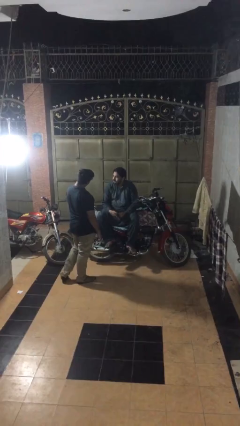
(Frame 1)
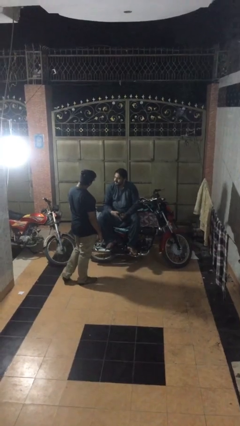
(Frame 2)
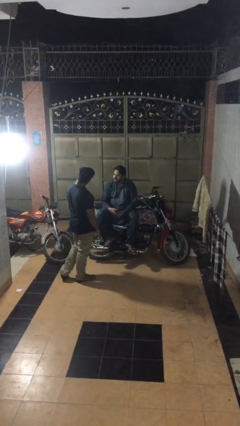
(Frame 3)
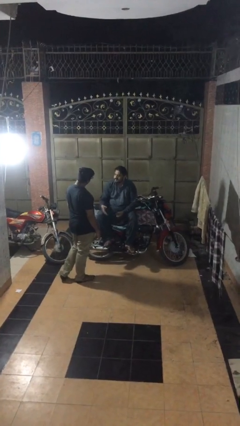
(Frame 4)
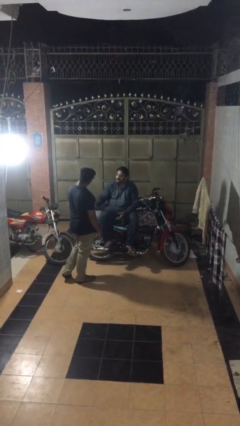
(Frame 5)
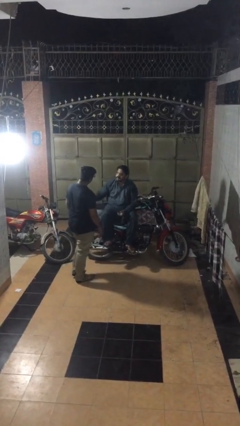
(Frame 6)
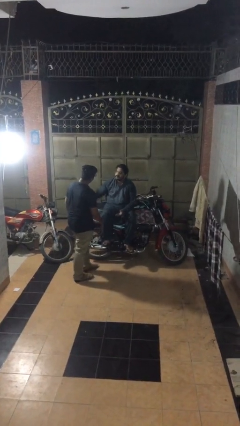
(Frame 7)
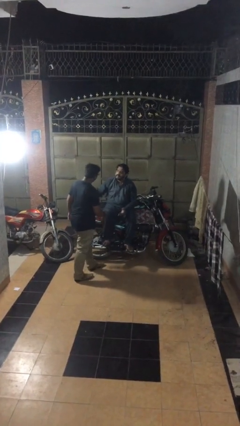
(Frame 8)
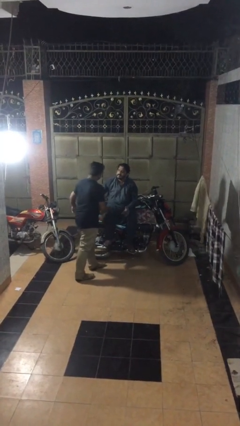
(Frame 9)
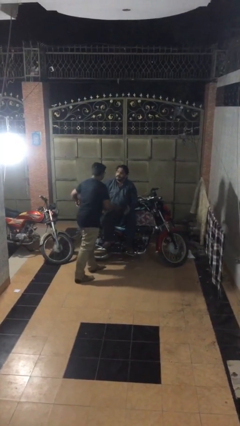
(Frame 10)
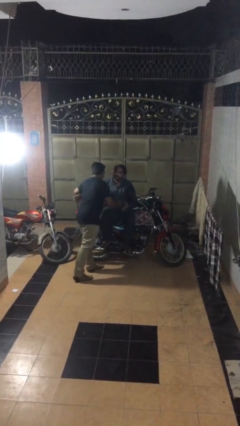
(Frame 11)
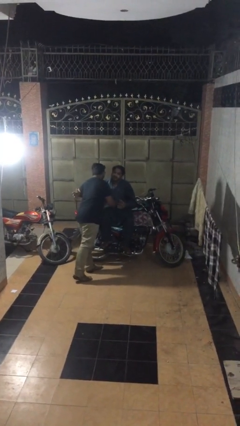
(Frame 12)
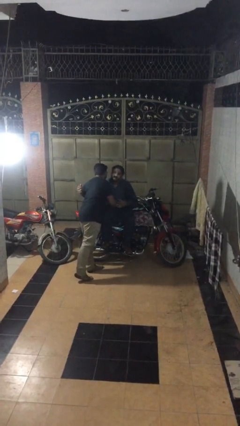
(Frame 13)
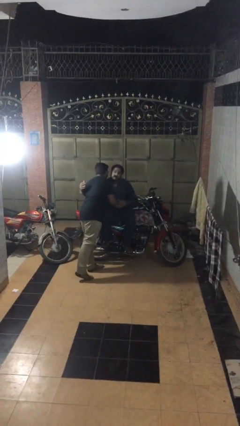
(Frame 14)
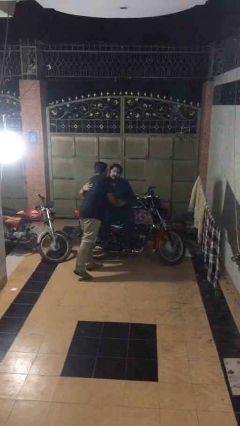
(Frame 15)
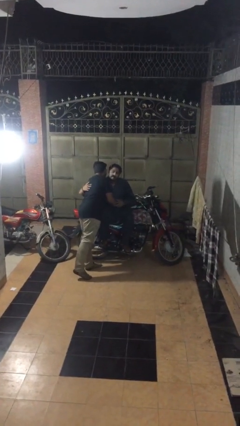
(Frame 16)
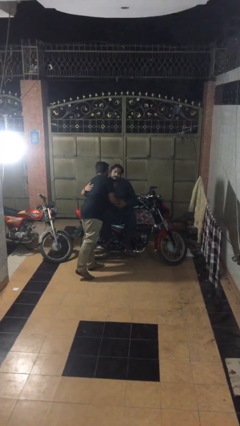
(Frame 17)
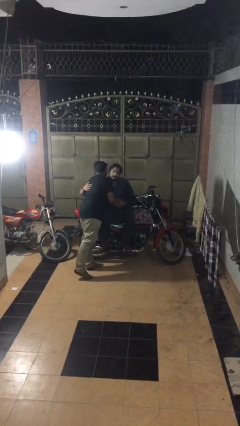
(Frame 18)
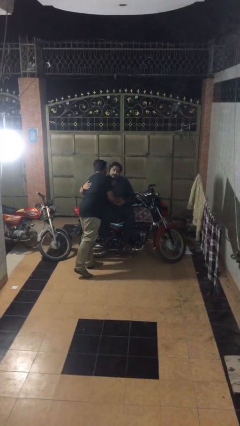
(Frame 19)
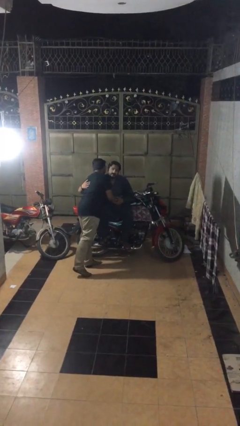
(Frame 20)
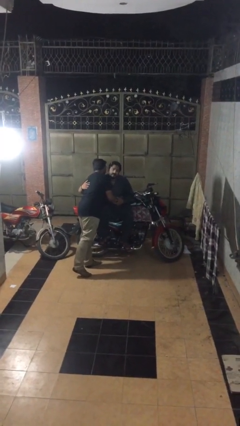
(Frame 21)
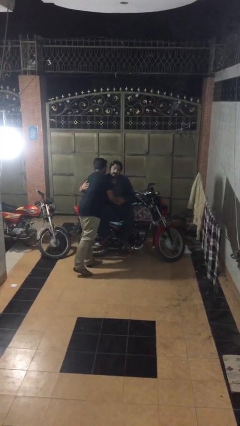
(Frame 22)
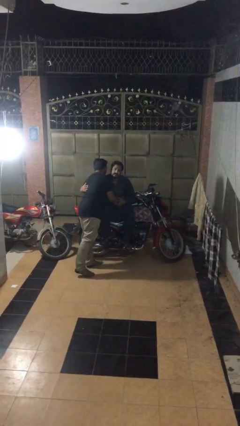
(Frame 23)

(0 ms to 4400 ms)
person embraces person

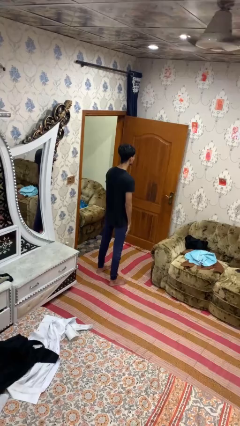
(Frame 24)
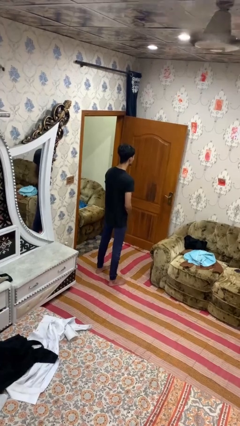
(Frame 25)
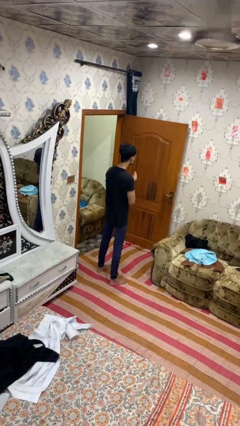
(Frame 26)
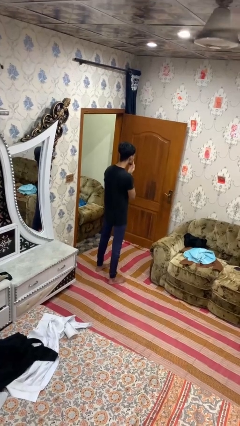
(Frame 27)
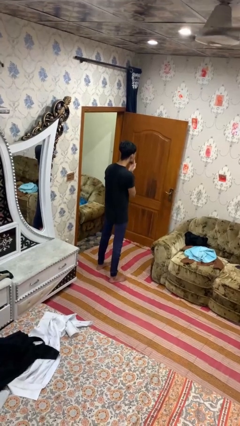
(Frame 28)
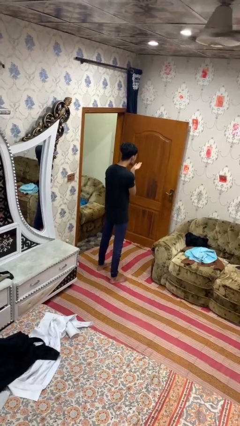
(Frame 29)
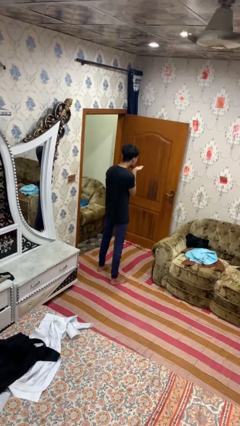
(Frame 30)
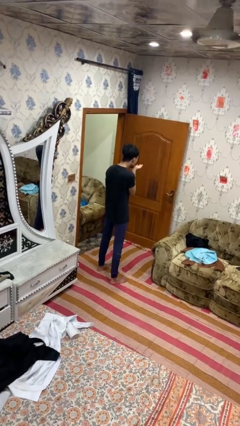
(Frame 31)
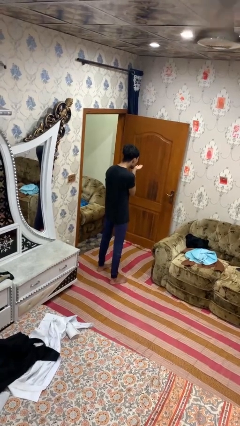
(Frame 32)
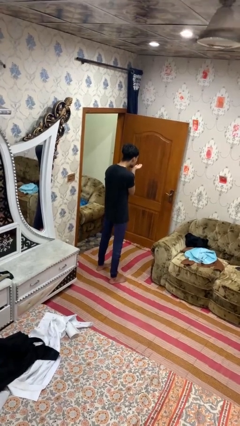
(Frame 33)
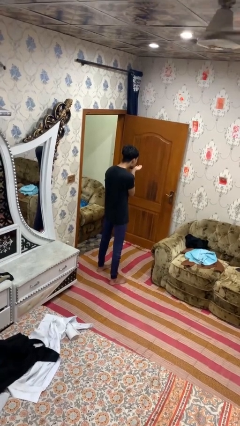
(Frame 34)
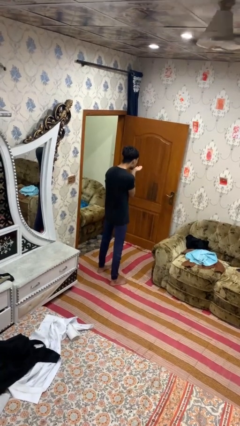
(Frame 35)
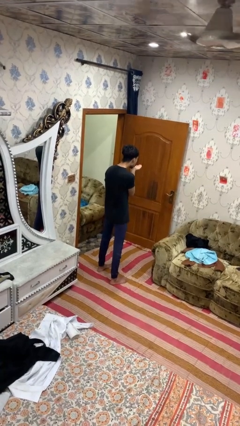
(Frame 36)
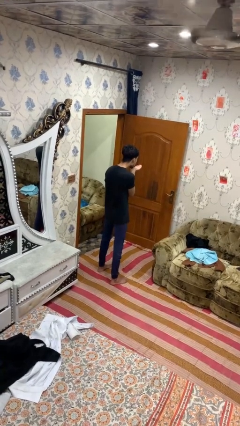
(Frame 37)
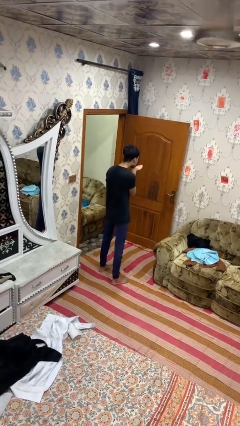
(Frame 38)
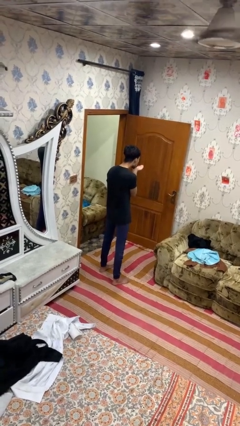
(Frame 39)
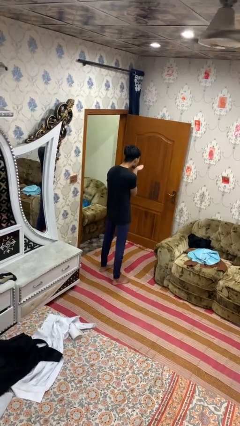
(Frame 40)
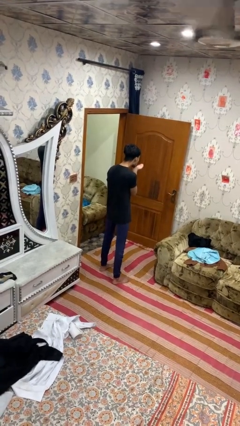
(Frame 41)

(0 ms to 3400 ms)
person gestures blow kiss

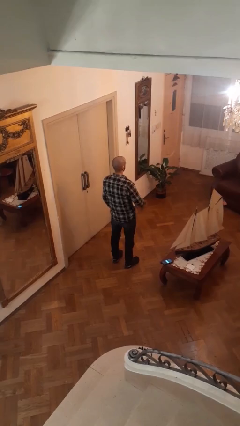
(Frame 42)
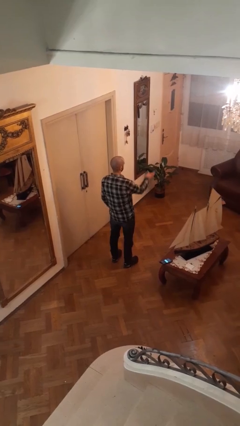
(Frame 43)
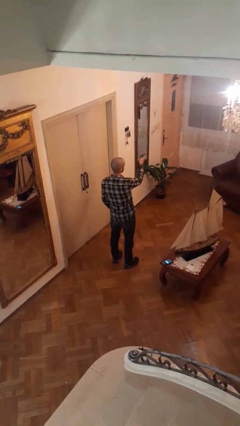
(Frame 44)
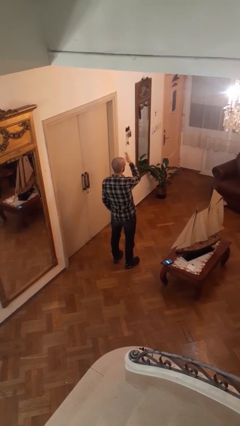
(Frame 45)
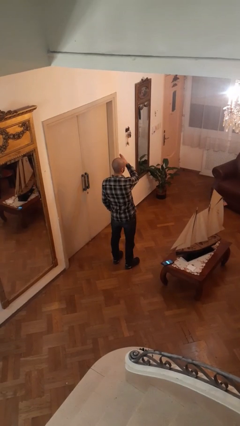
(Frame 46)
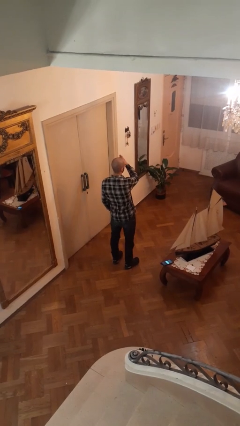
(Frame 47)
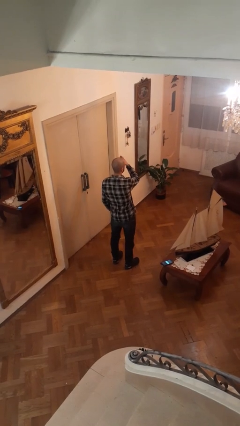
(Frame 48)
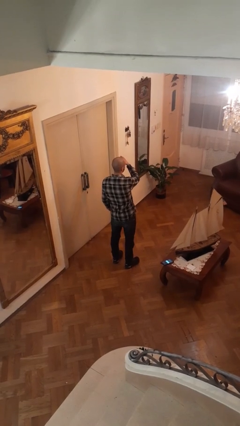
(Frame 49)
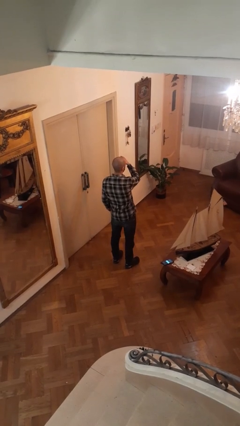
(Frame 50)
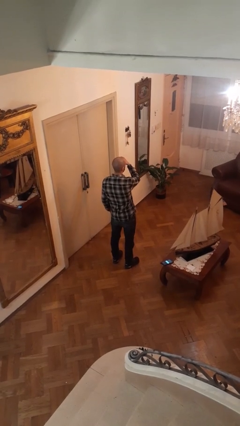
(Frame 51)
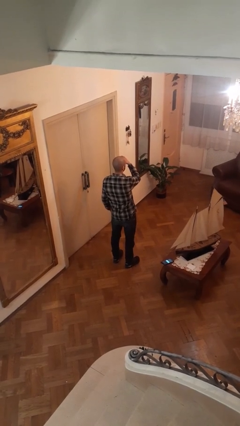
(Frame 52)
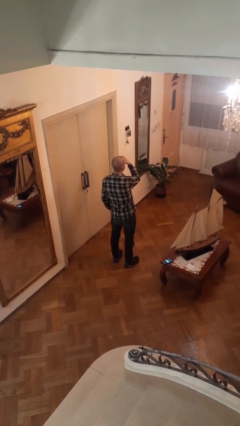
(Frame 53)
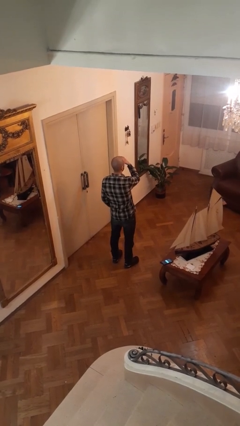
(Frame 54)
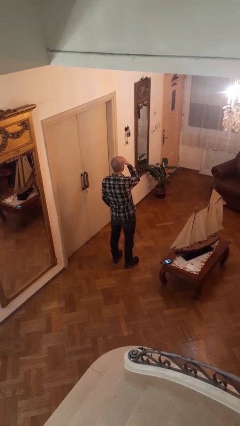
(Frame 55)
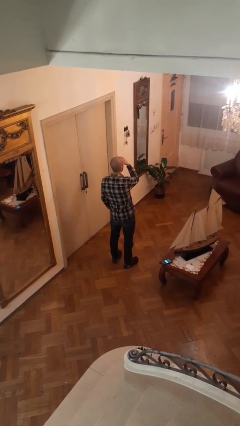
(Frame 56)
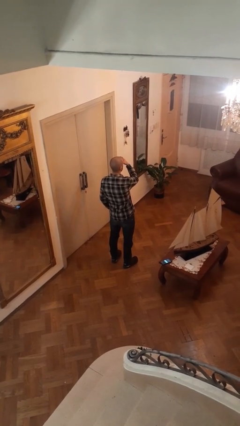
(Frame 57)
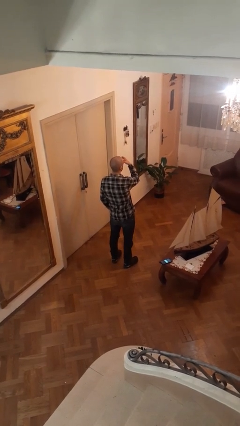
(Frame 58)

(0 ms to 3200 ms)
person gestures swipe left

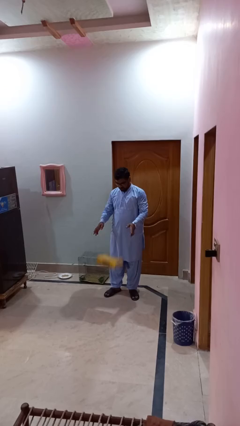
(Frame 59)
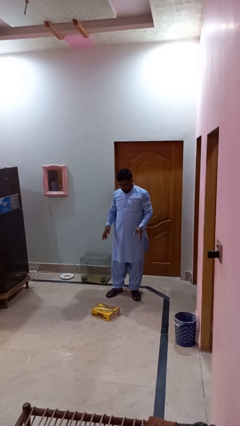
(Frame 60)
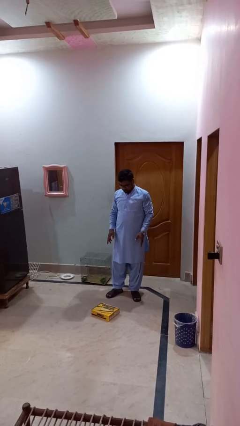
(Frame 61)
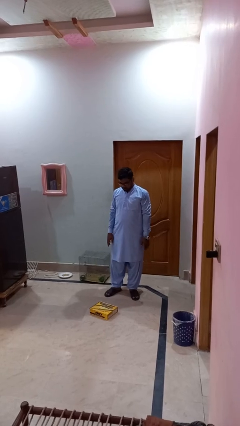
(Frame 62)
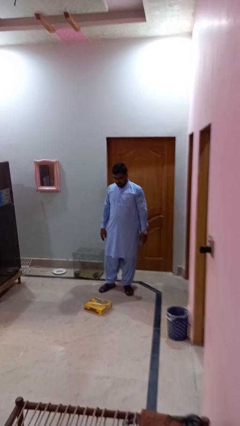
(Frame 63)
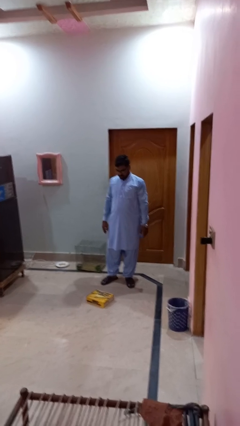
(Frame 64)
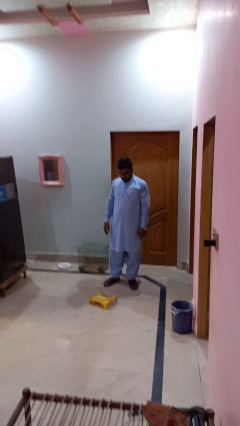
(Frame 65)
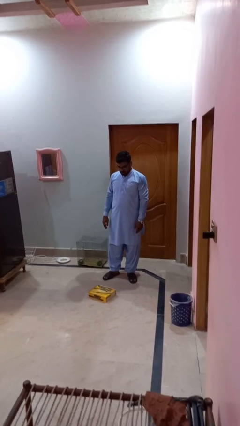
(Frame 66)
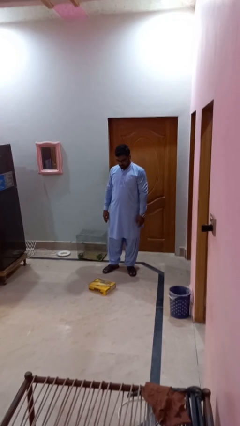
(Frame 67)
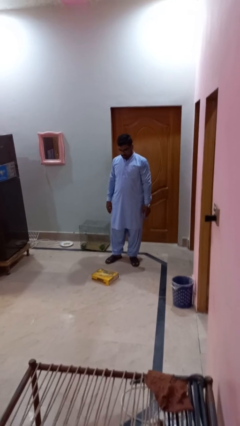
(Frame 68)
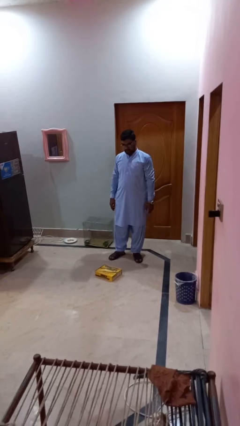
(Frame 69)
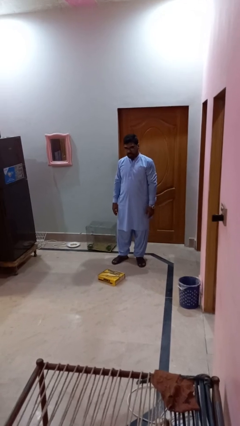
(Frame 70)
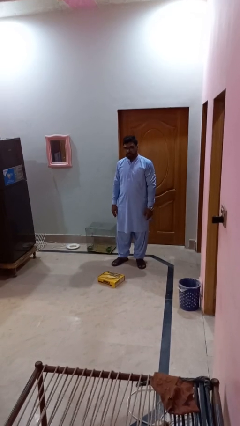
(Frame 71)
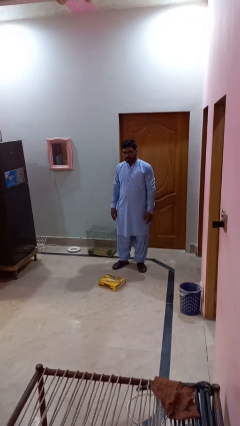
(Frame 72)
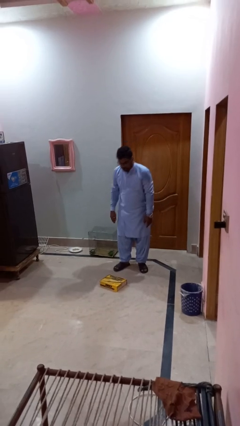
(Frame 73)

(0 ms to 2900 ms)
person drops object

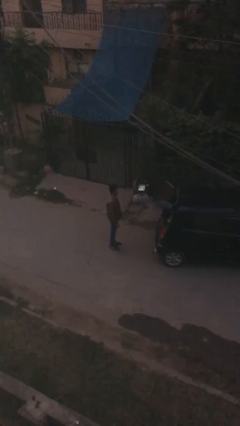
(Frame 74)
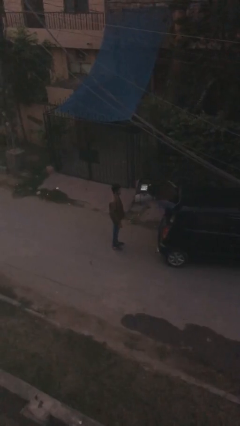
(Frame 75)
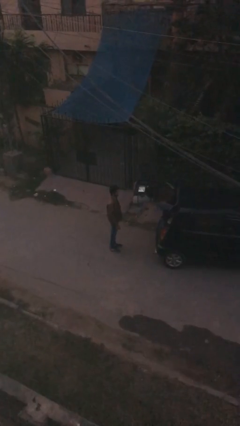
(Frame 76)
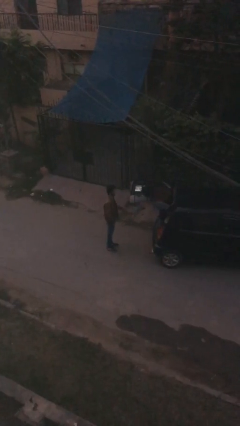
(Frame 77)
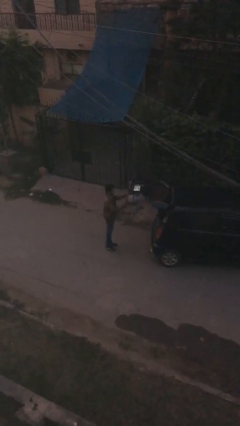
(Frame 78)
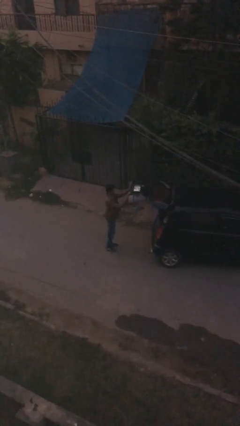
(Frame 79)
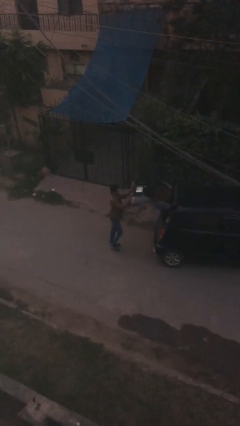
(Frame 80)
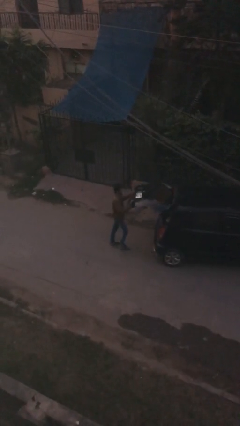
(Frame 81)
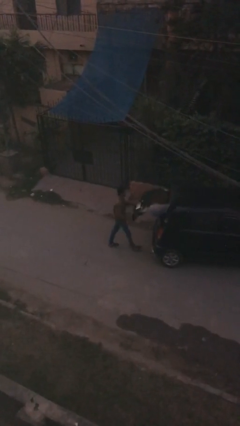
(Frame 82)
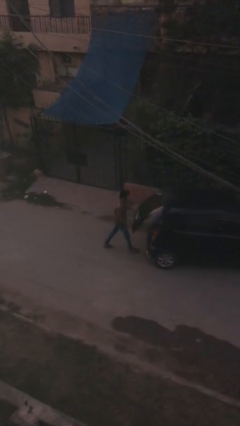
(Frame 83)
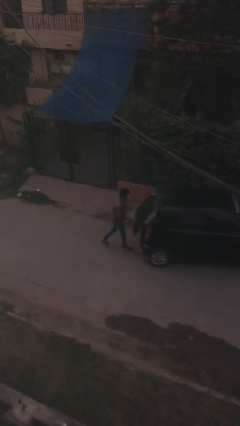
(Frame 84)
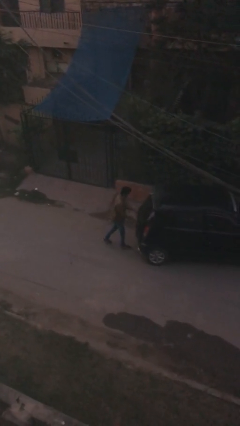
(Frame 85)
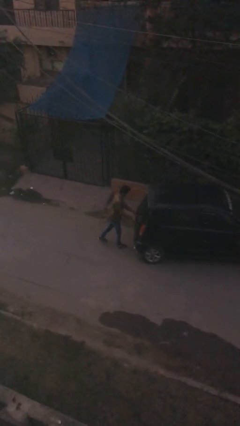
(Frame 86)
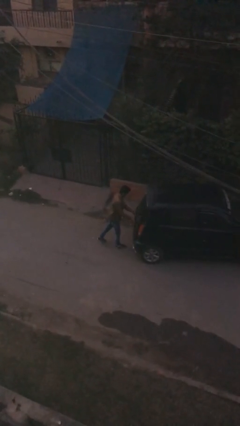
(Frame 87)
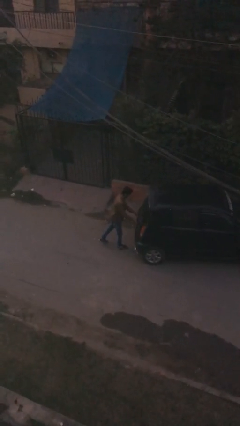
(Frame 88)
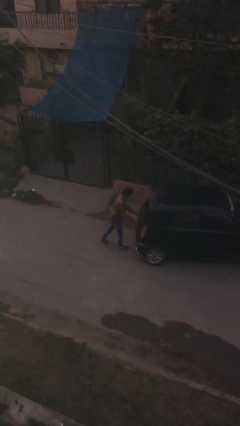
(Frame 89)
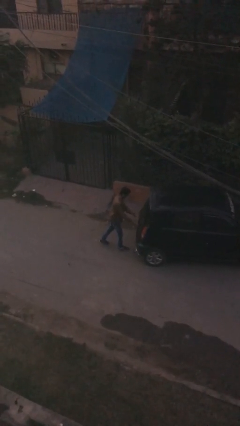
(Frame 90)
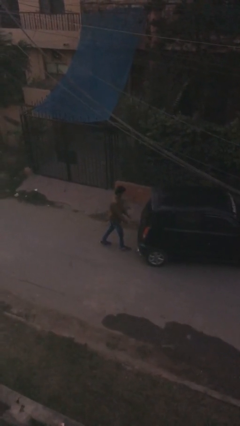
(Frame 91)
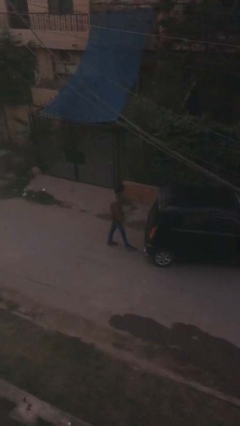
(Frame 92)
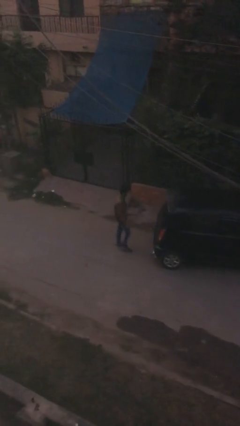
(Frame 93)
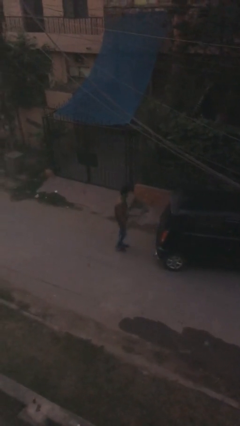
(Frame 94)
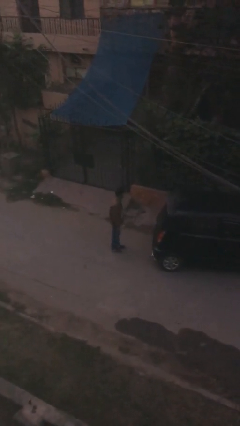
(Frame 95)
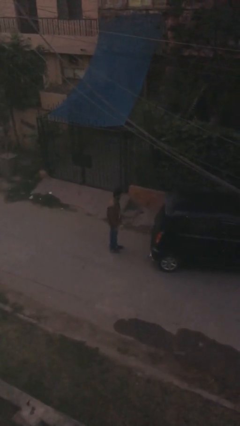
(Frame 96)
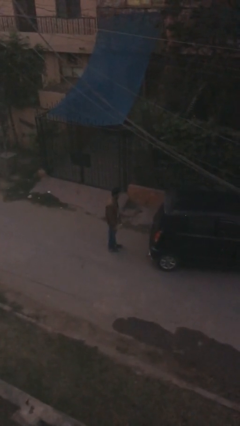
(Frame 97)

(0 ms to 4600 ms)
person closes car trunk
